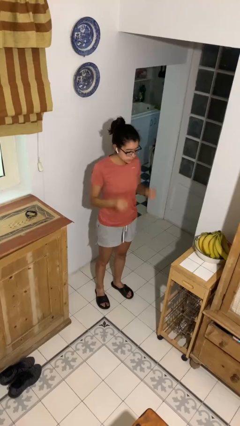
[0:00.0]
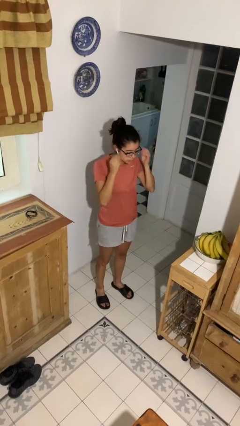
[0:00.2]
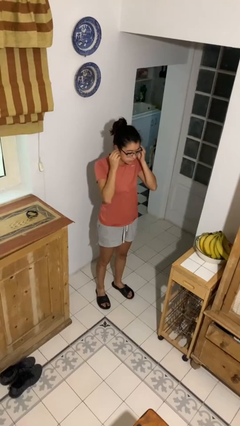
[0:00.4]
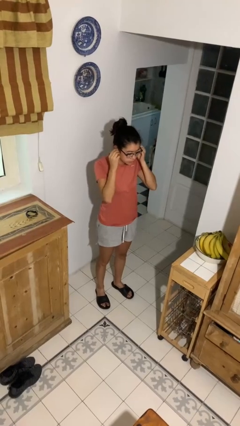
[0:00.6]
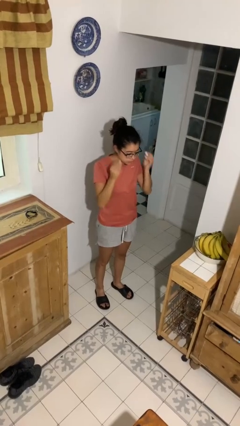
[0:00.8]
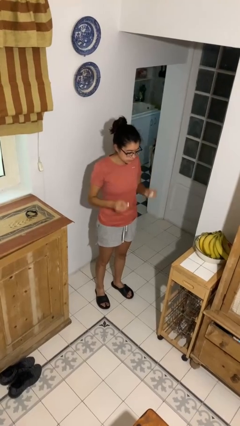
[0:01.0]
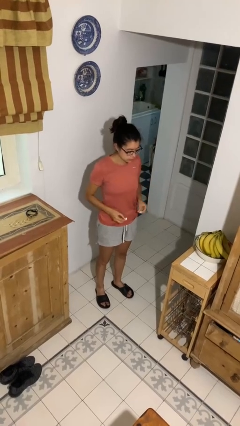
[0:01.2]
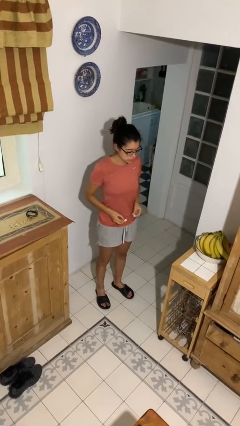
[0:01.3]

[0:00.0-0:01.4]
person takes off headphones

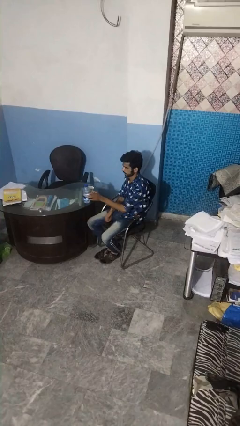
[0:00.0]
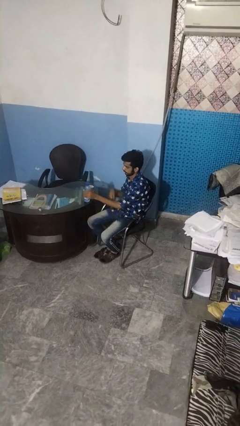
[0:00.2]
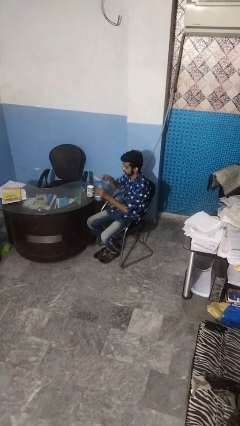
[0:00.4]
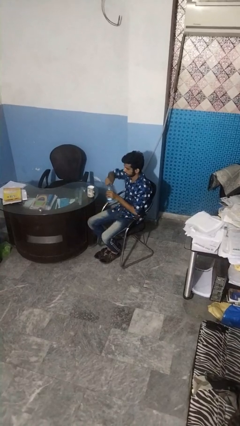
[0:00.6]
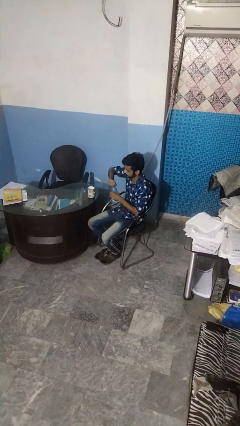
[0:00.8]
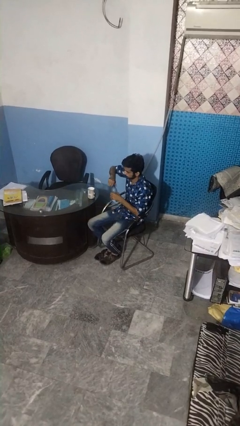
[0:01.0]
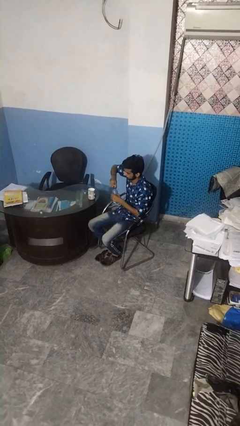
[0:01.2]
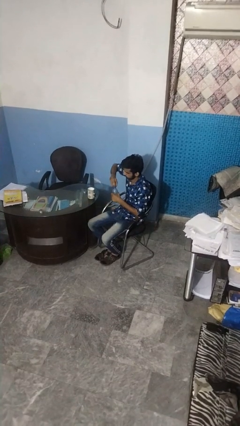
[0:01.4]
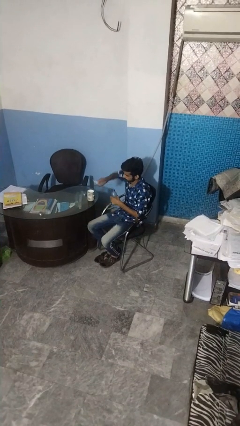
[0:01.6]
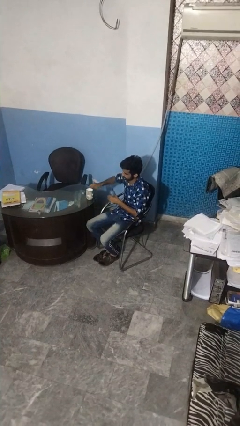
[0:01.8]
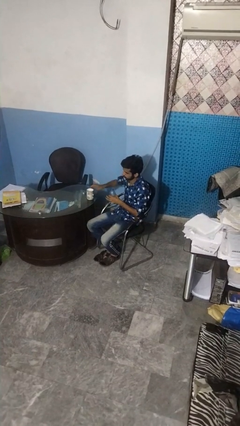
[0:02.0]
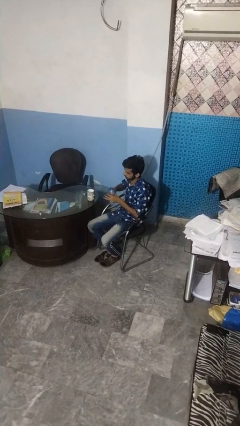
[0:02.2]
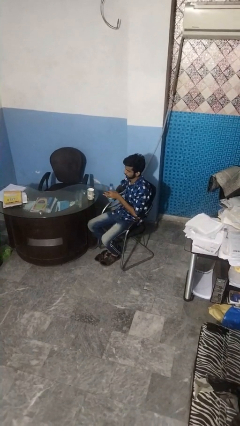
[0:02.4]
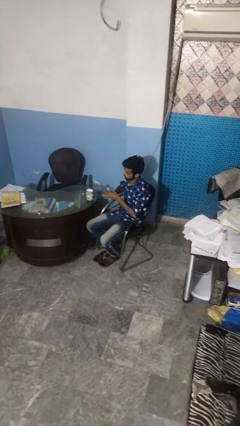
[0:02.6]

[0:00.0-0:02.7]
person unscrews lid from bottle

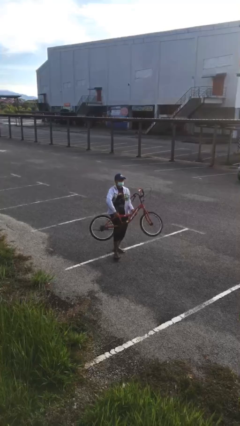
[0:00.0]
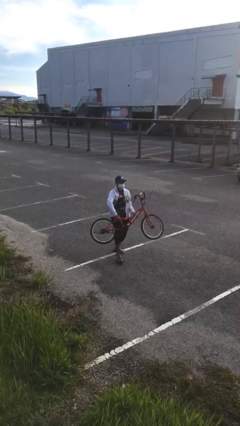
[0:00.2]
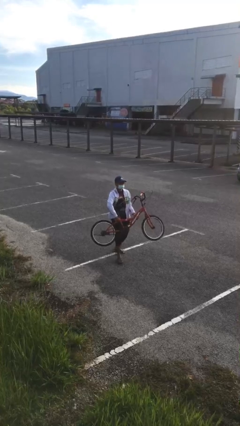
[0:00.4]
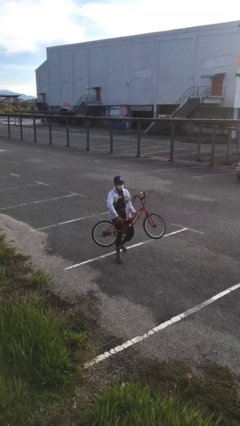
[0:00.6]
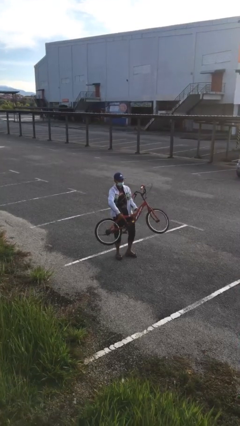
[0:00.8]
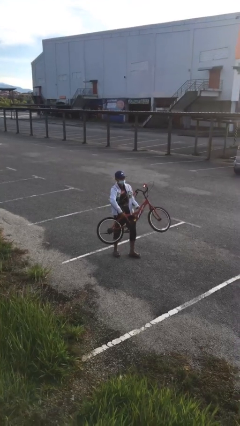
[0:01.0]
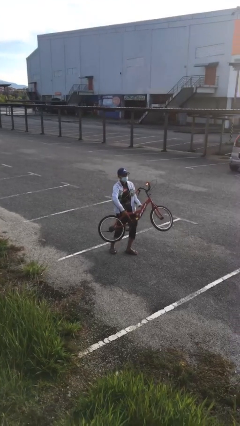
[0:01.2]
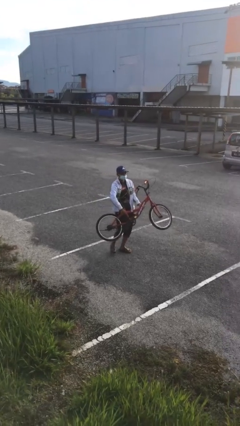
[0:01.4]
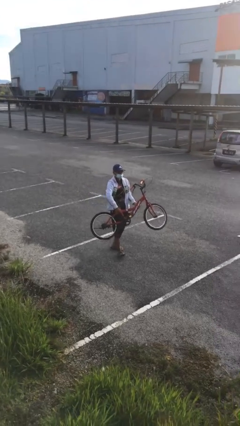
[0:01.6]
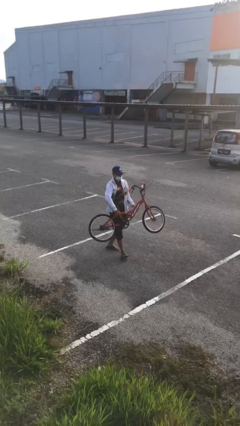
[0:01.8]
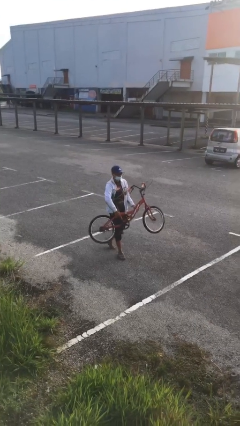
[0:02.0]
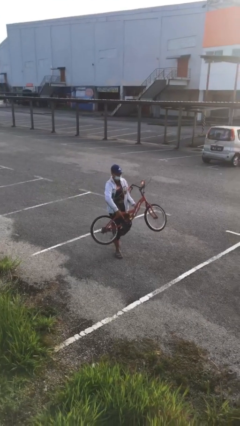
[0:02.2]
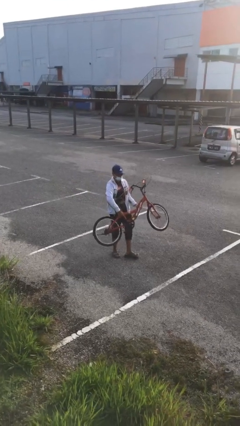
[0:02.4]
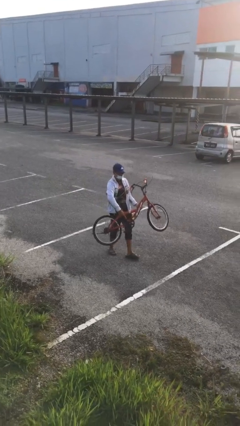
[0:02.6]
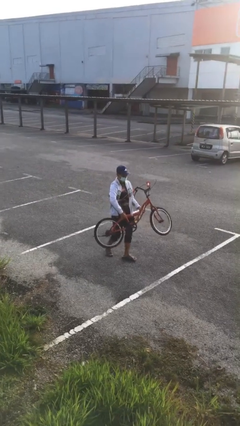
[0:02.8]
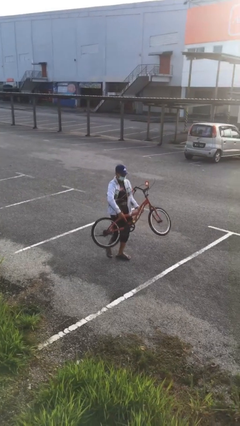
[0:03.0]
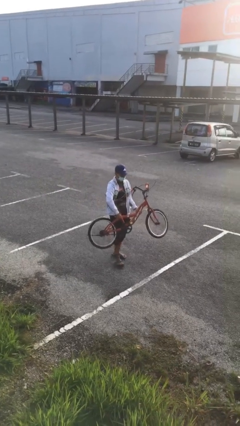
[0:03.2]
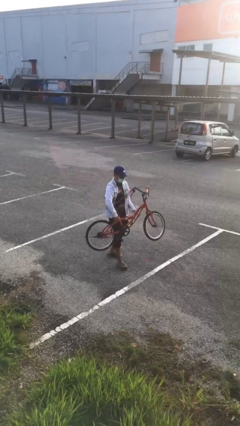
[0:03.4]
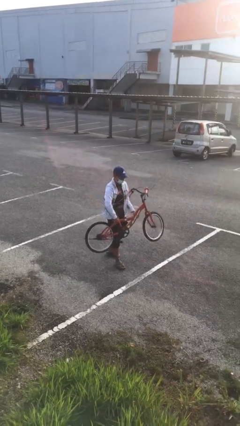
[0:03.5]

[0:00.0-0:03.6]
person carries heavy object

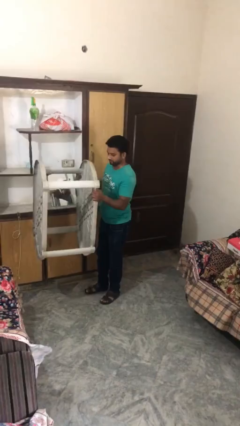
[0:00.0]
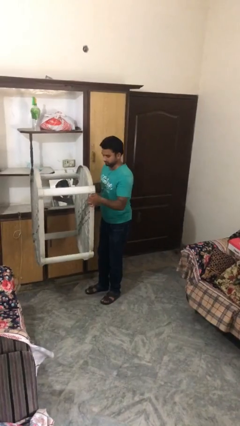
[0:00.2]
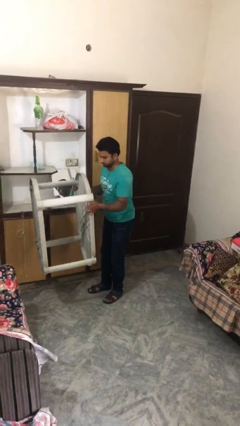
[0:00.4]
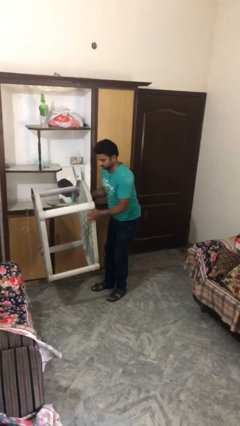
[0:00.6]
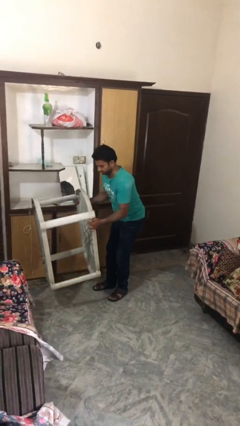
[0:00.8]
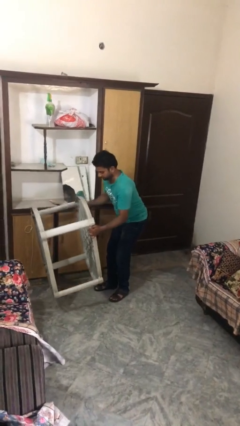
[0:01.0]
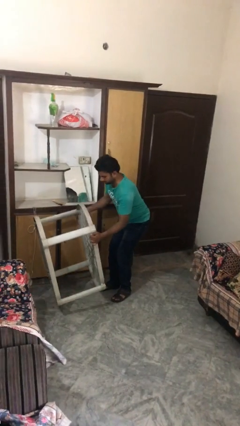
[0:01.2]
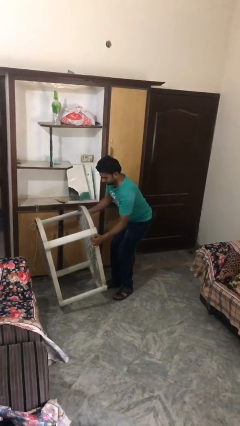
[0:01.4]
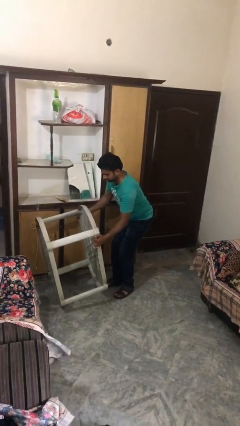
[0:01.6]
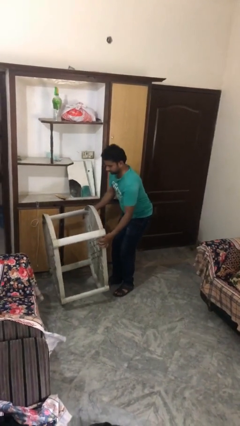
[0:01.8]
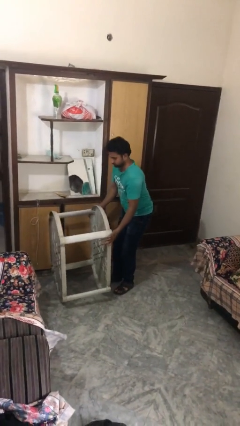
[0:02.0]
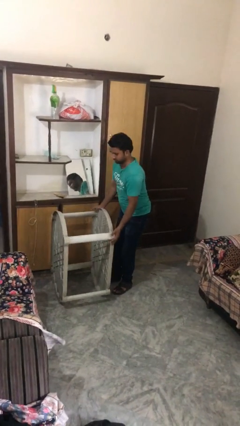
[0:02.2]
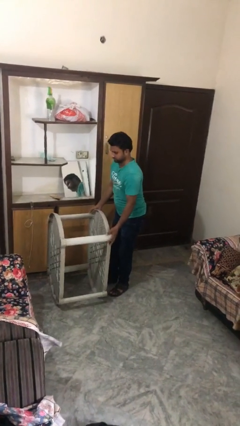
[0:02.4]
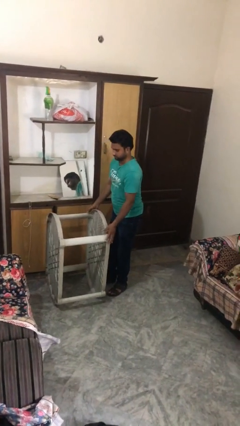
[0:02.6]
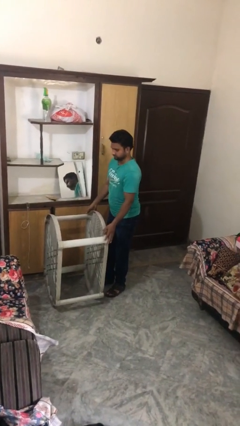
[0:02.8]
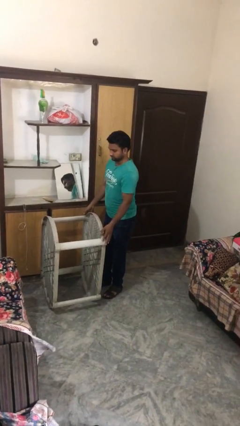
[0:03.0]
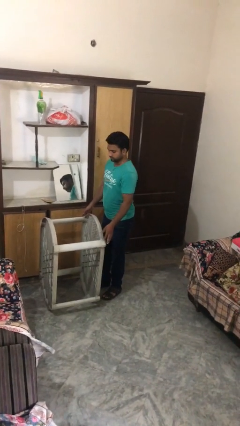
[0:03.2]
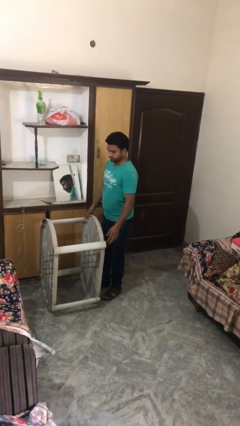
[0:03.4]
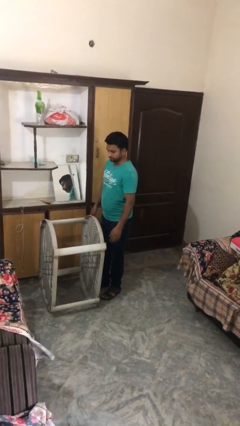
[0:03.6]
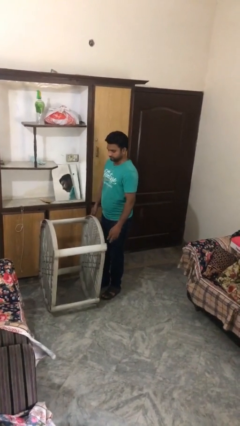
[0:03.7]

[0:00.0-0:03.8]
person puts down object on floor

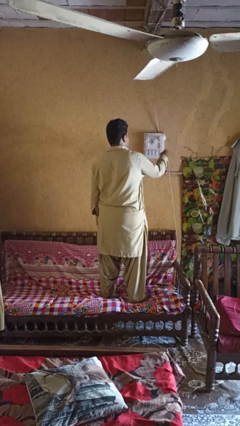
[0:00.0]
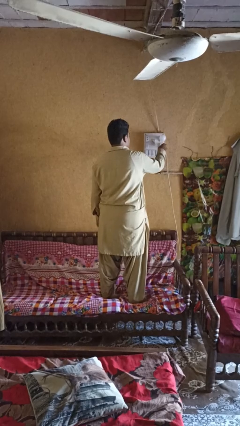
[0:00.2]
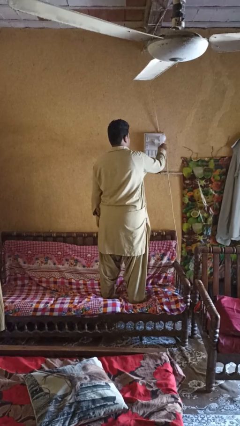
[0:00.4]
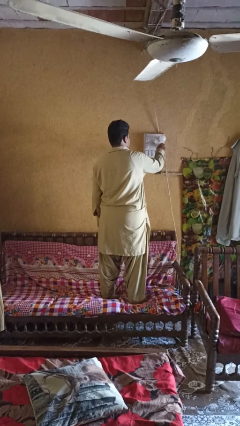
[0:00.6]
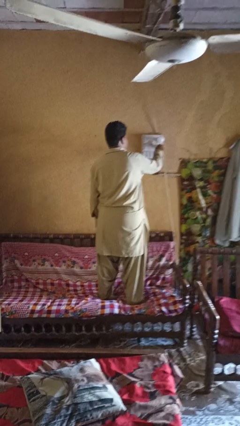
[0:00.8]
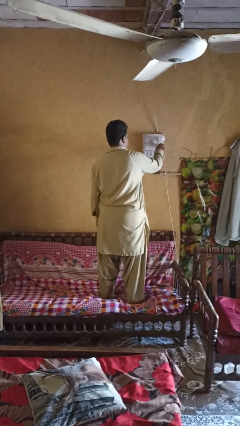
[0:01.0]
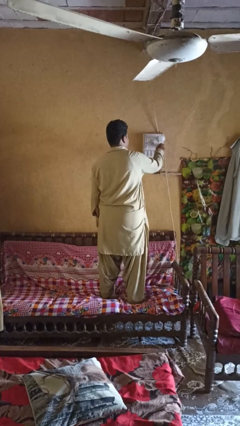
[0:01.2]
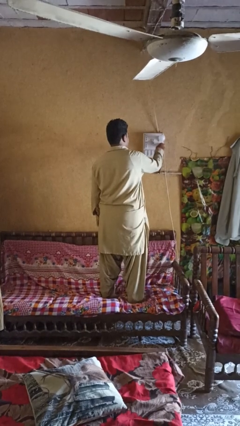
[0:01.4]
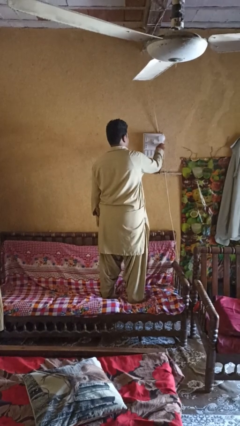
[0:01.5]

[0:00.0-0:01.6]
person plugs into electrical socket

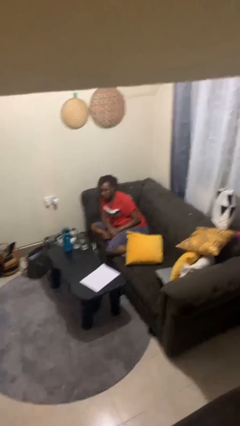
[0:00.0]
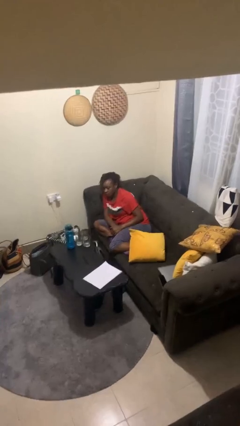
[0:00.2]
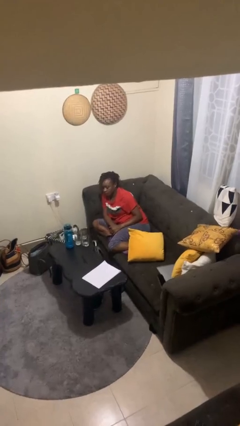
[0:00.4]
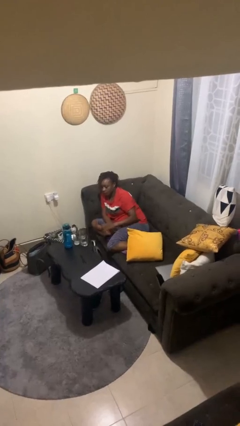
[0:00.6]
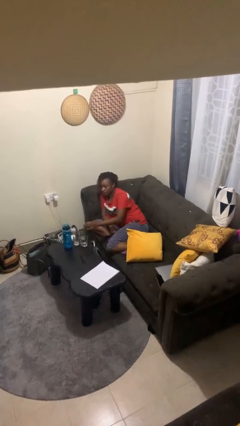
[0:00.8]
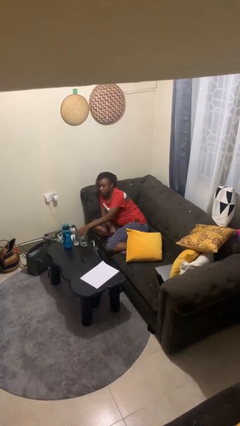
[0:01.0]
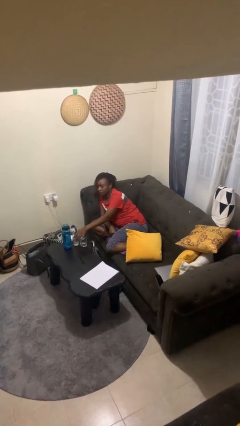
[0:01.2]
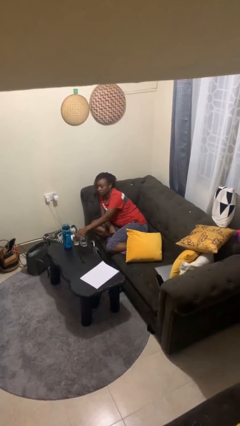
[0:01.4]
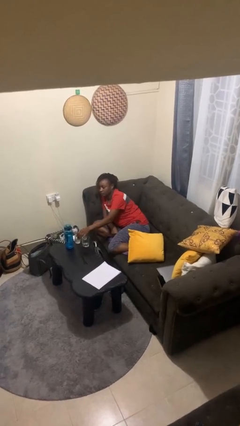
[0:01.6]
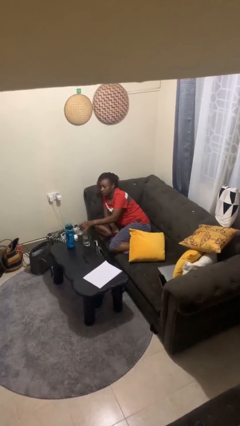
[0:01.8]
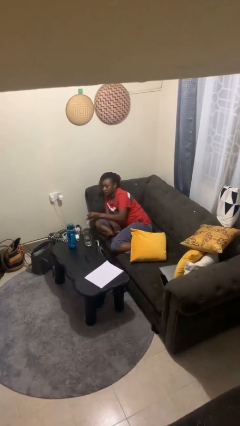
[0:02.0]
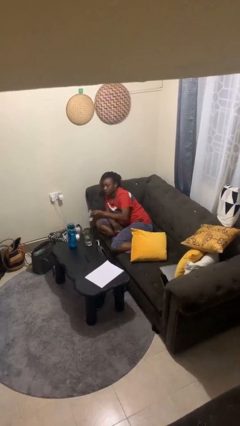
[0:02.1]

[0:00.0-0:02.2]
person picks up object from table

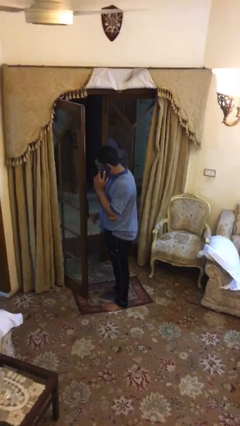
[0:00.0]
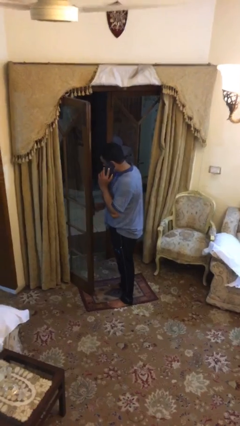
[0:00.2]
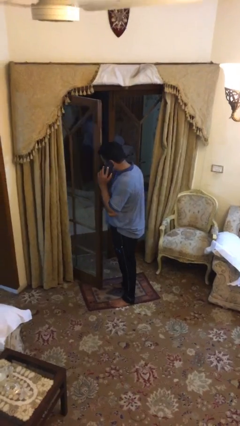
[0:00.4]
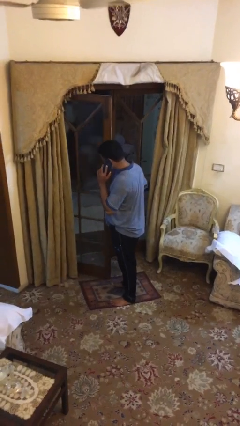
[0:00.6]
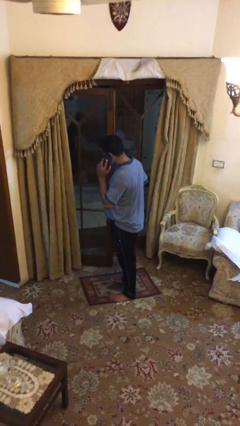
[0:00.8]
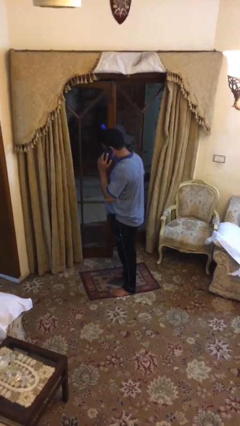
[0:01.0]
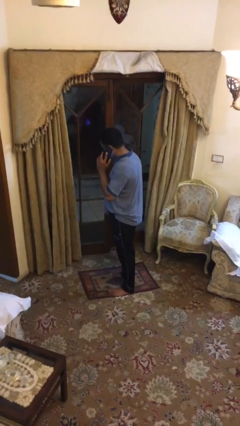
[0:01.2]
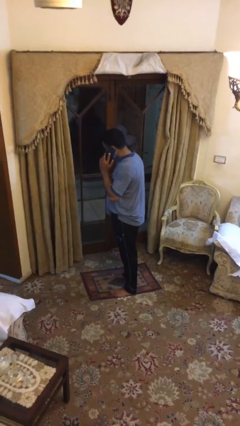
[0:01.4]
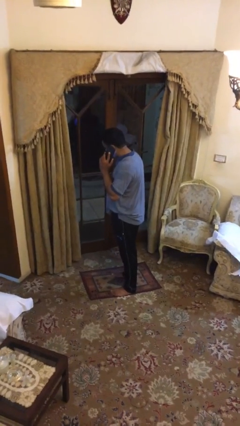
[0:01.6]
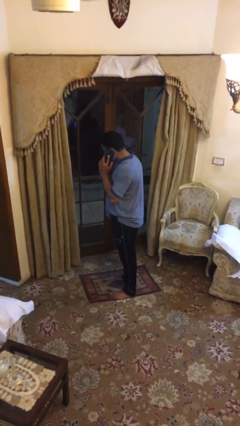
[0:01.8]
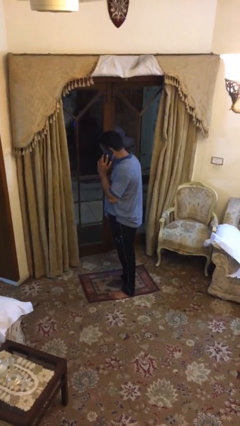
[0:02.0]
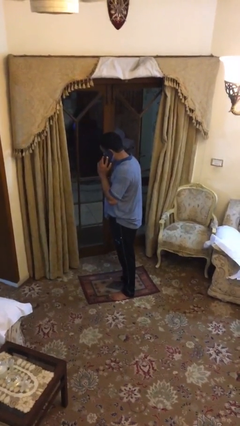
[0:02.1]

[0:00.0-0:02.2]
person closes facility door
